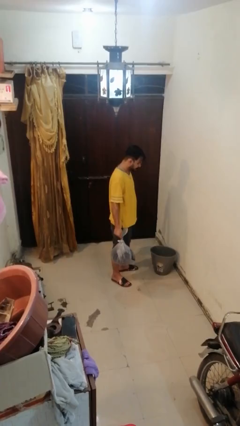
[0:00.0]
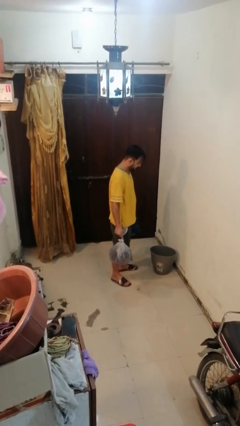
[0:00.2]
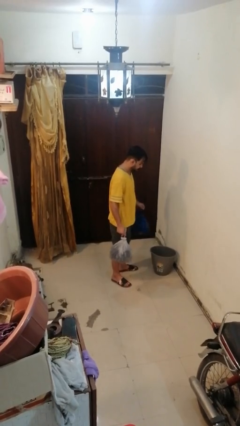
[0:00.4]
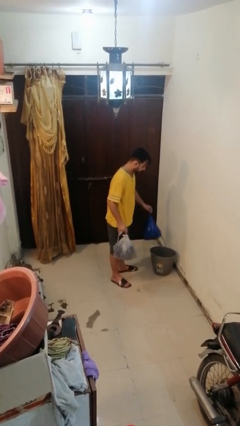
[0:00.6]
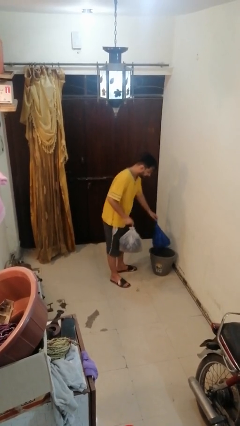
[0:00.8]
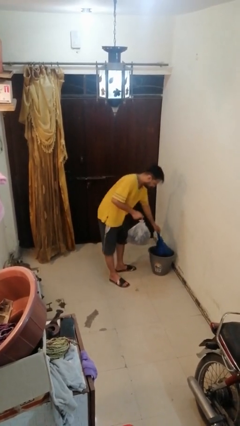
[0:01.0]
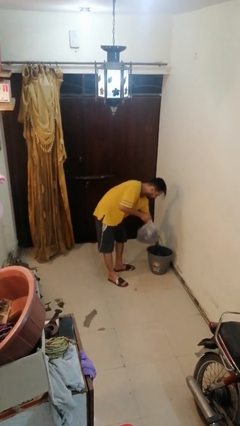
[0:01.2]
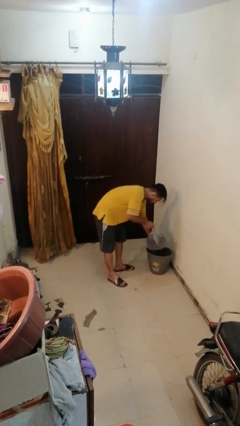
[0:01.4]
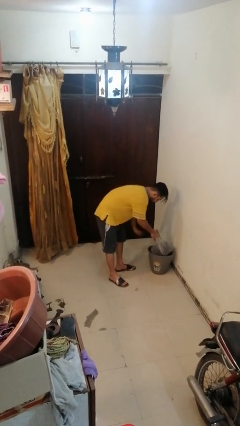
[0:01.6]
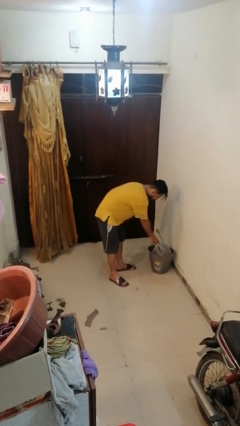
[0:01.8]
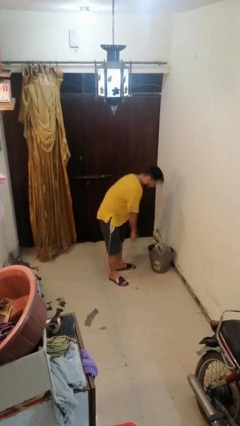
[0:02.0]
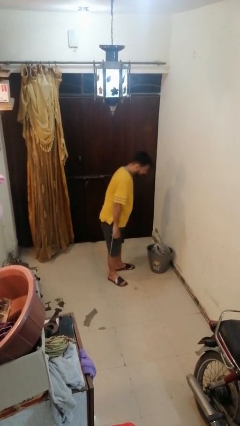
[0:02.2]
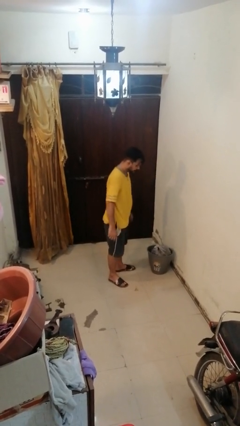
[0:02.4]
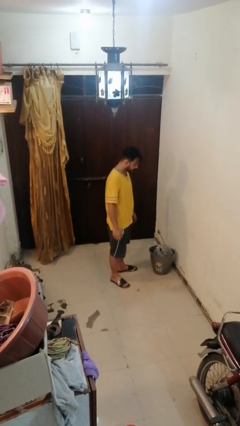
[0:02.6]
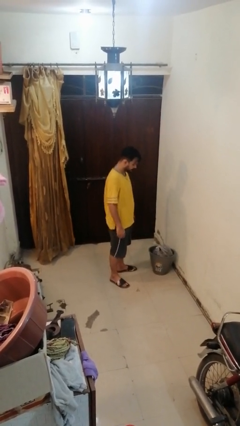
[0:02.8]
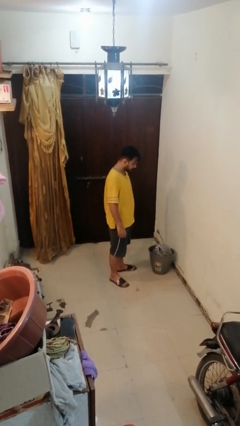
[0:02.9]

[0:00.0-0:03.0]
person discards trash

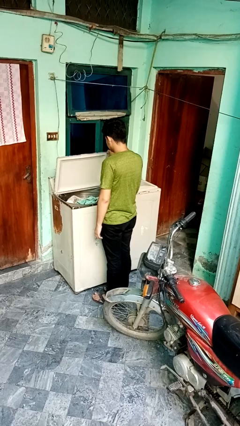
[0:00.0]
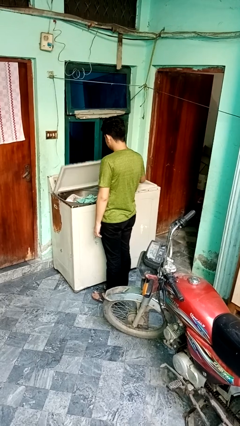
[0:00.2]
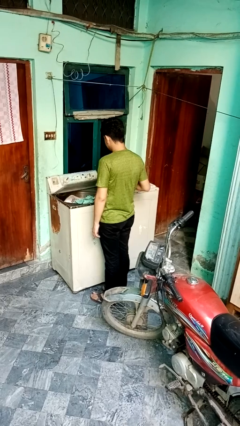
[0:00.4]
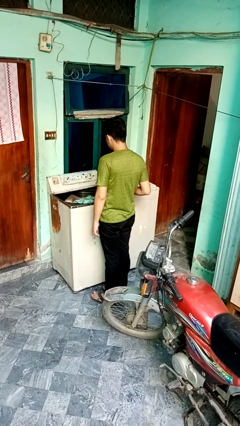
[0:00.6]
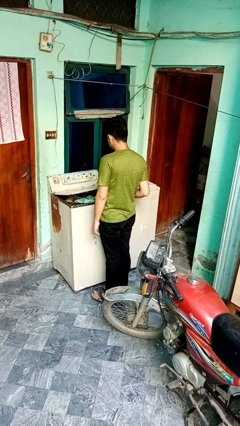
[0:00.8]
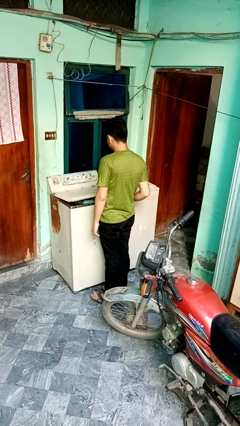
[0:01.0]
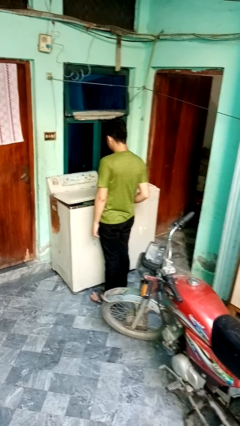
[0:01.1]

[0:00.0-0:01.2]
person closes clothes washer

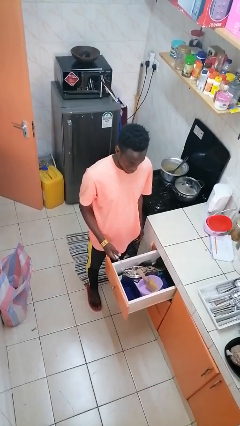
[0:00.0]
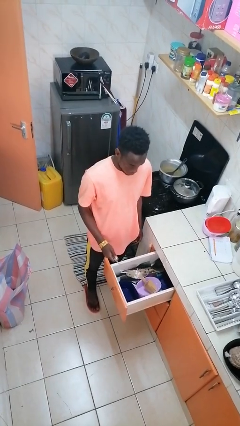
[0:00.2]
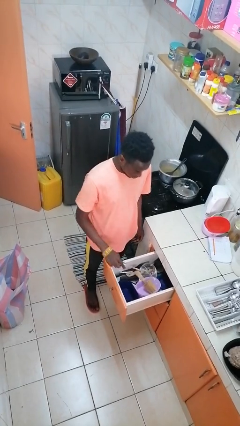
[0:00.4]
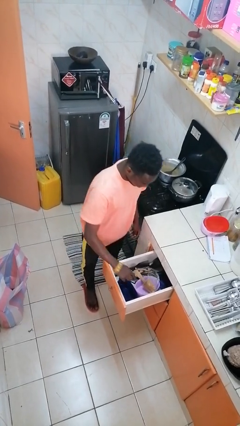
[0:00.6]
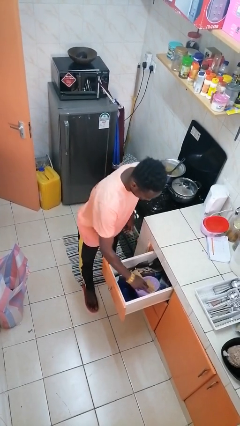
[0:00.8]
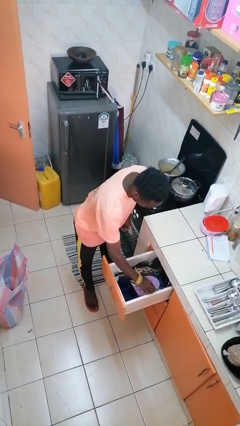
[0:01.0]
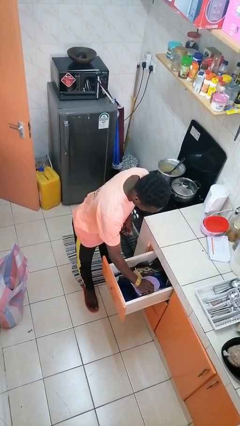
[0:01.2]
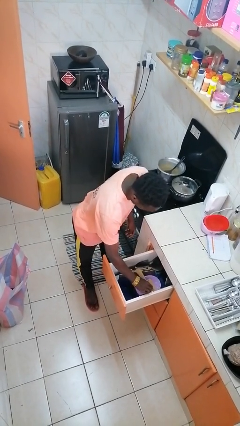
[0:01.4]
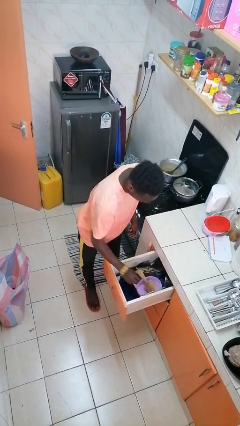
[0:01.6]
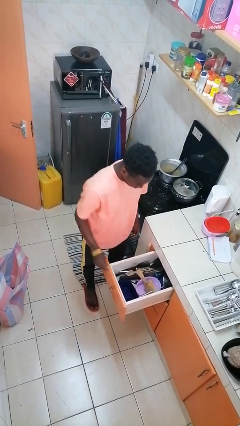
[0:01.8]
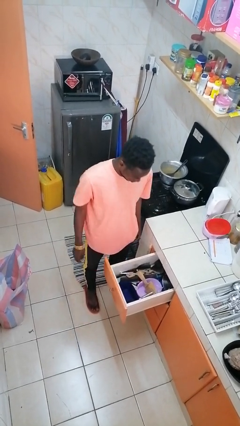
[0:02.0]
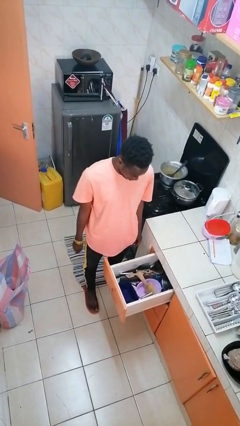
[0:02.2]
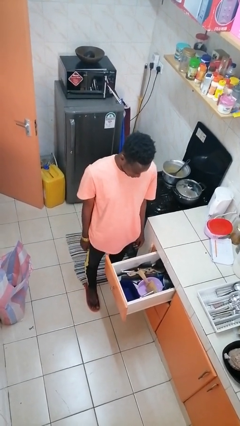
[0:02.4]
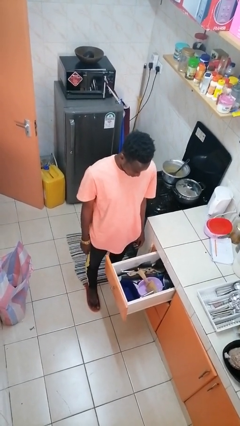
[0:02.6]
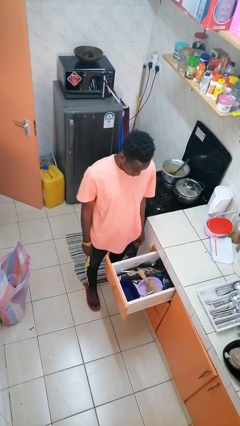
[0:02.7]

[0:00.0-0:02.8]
person puts object into kitchen drawer

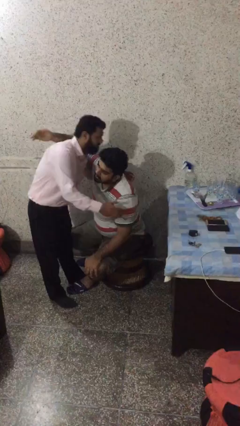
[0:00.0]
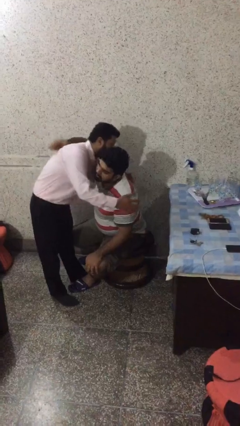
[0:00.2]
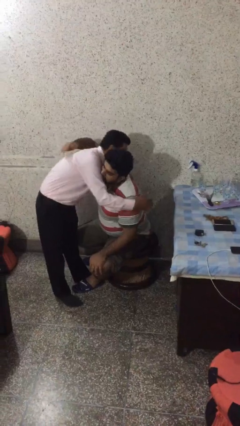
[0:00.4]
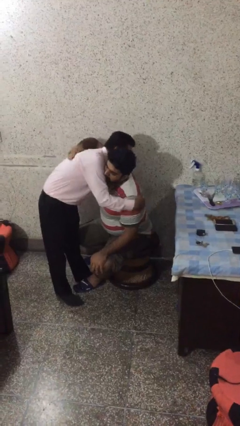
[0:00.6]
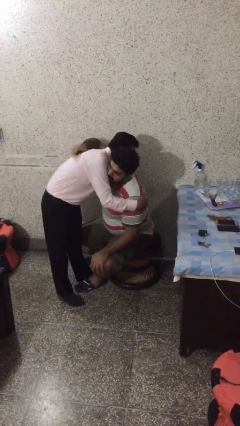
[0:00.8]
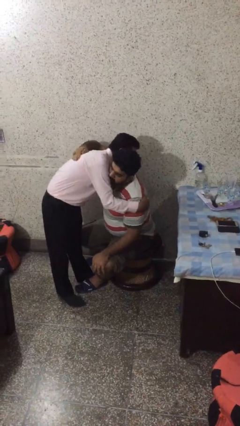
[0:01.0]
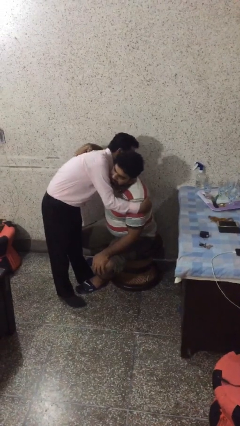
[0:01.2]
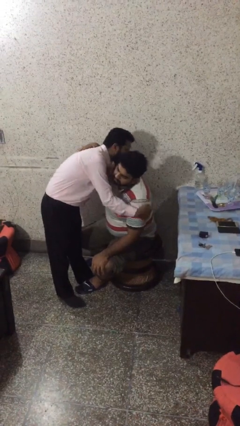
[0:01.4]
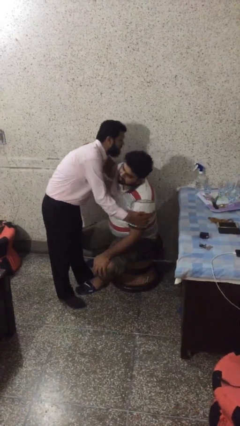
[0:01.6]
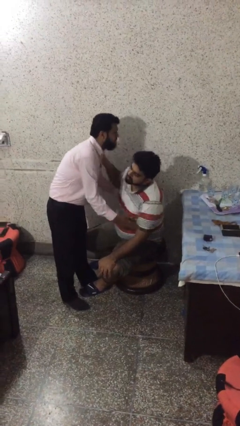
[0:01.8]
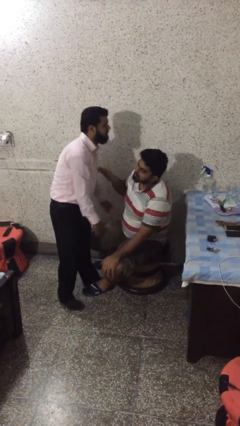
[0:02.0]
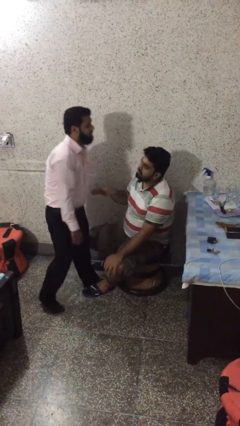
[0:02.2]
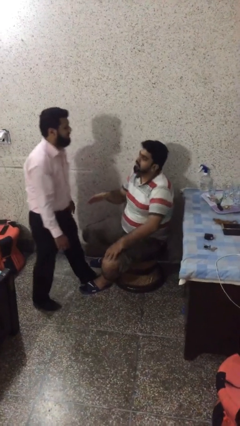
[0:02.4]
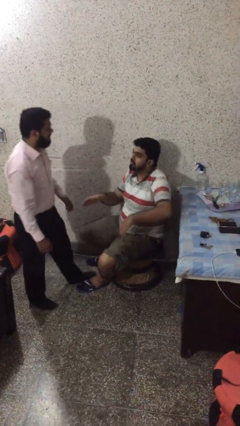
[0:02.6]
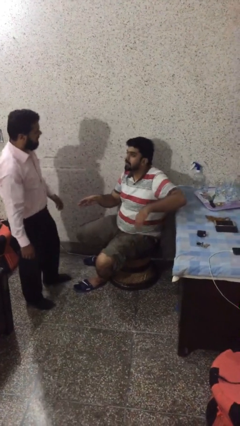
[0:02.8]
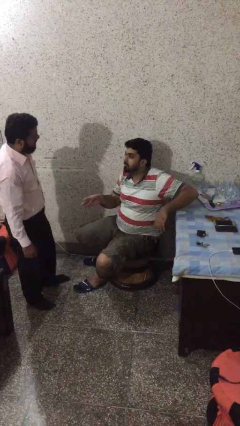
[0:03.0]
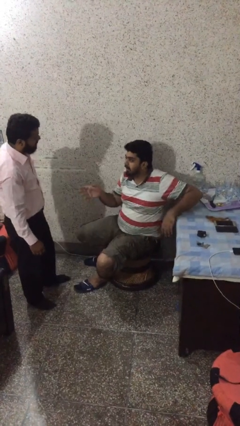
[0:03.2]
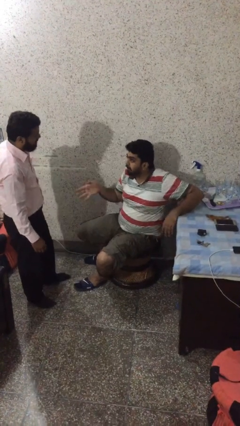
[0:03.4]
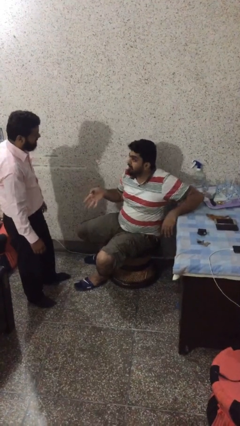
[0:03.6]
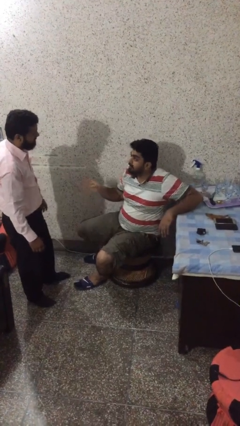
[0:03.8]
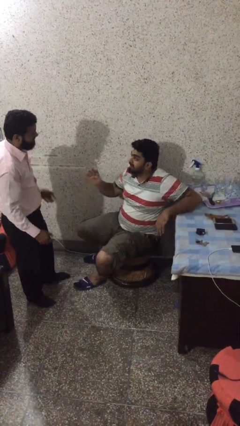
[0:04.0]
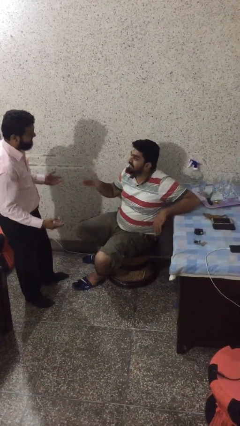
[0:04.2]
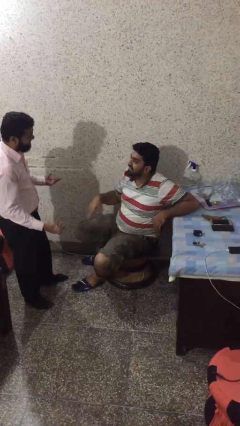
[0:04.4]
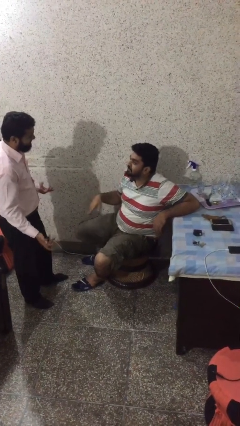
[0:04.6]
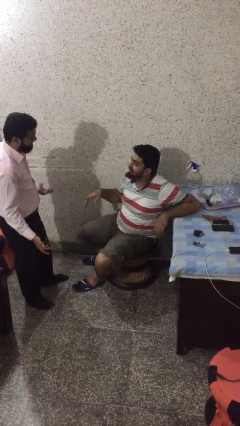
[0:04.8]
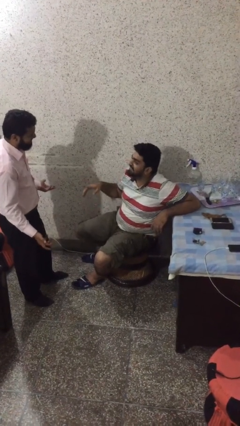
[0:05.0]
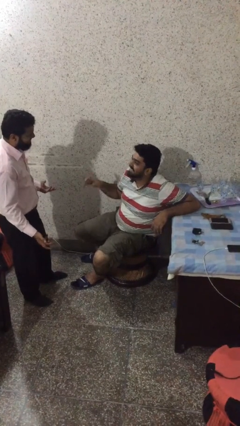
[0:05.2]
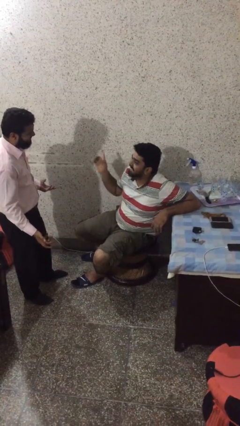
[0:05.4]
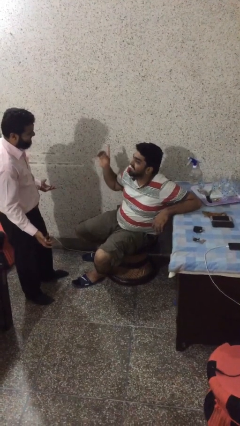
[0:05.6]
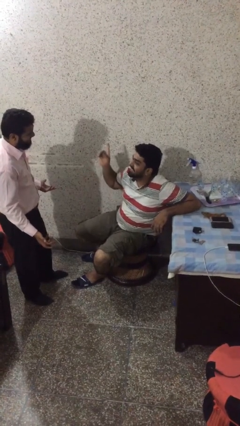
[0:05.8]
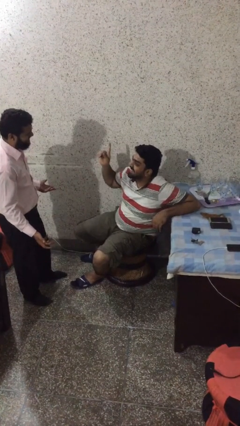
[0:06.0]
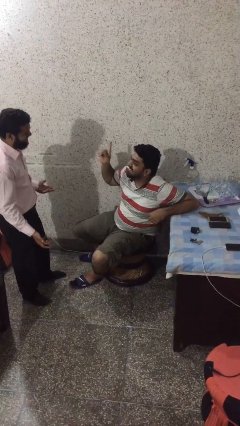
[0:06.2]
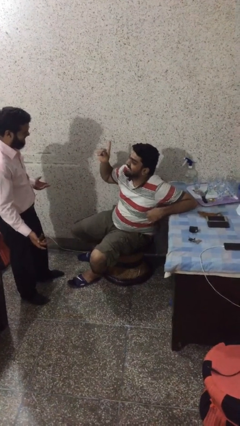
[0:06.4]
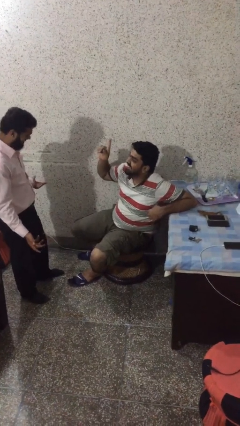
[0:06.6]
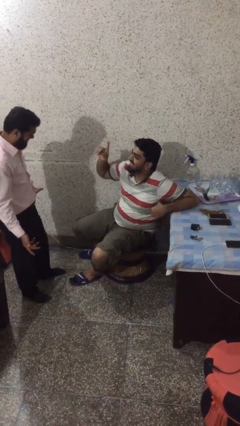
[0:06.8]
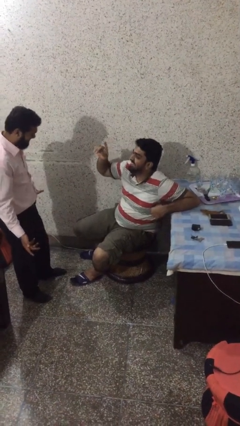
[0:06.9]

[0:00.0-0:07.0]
person embraces person

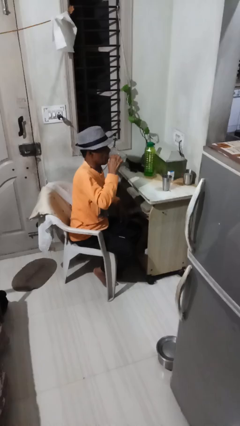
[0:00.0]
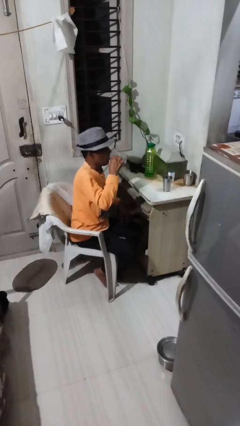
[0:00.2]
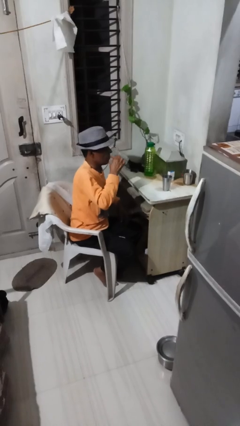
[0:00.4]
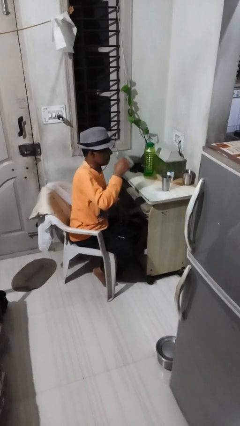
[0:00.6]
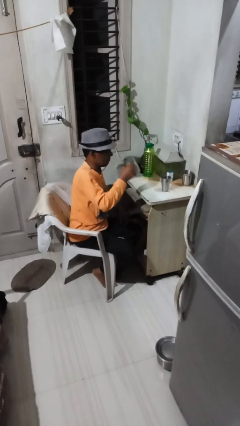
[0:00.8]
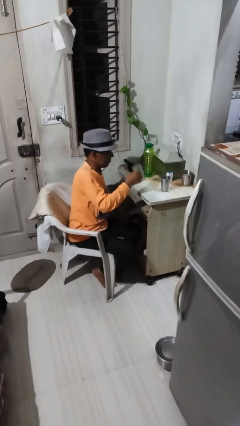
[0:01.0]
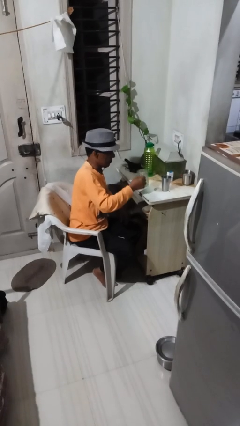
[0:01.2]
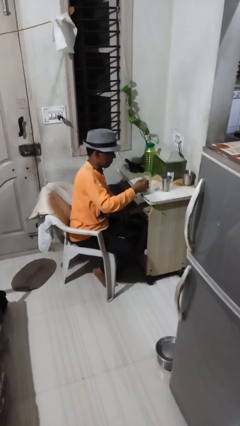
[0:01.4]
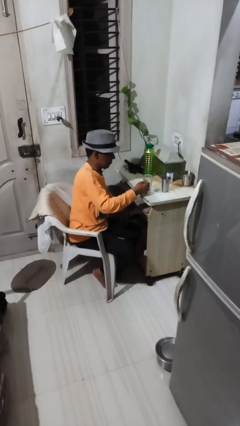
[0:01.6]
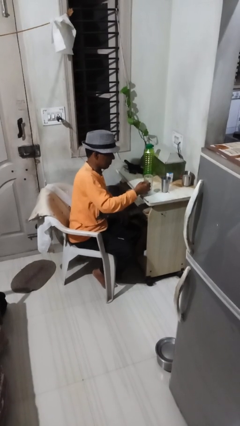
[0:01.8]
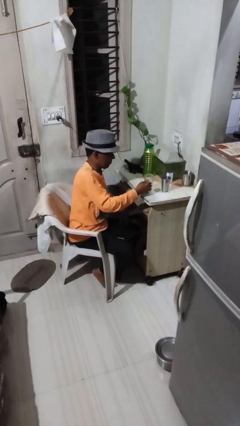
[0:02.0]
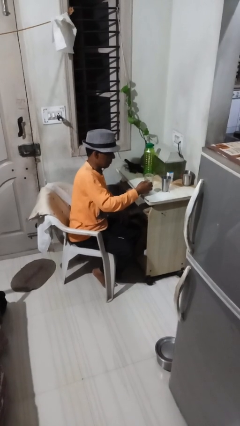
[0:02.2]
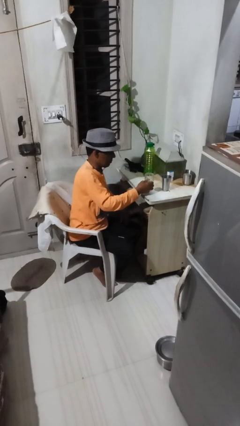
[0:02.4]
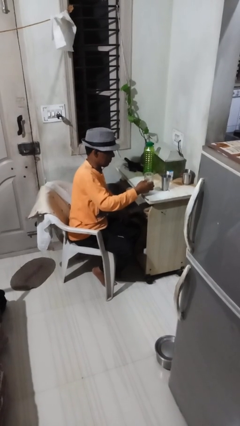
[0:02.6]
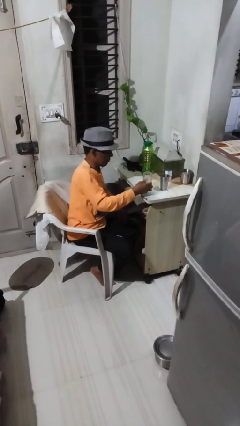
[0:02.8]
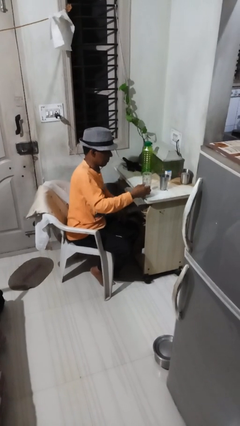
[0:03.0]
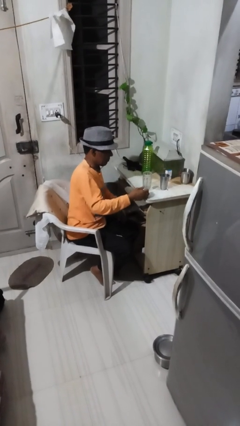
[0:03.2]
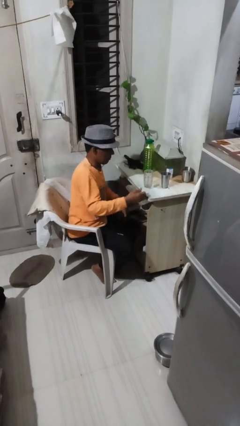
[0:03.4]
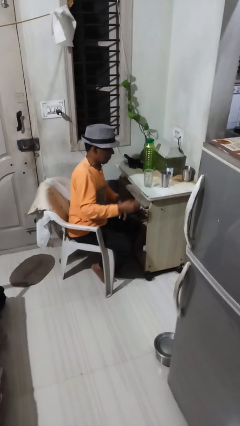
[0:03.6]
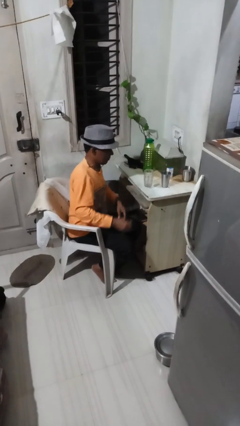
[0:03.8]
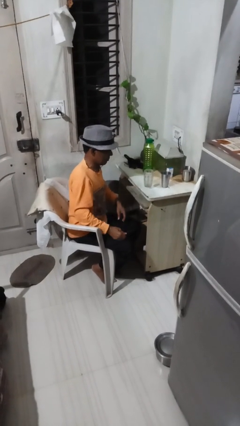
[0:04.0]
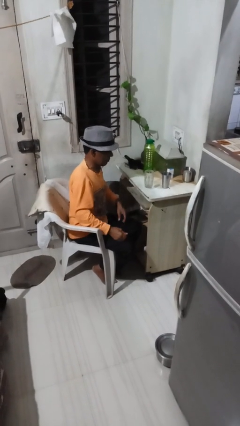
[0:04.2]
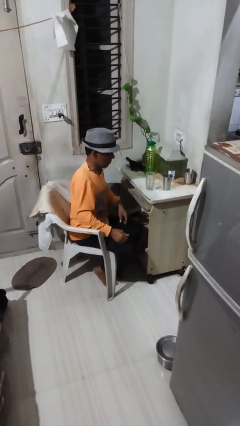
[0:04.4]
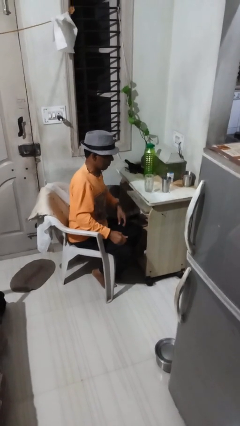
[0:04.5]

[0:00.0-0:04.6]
person puts down object on table
